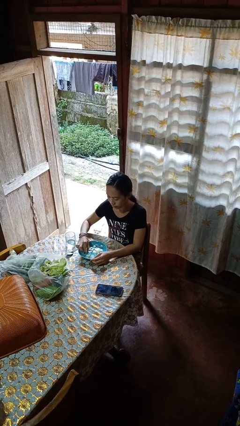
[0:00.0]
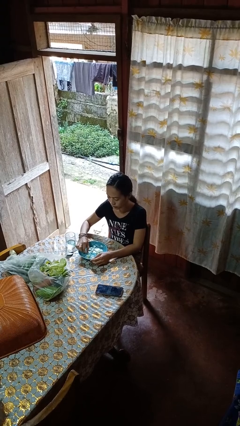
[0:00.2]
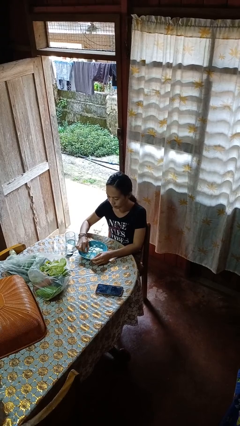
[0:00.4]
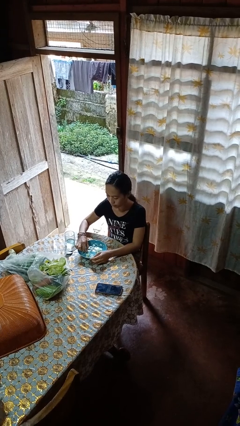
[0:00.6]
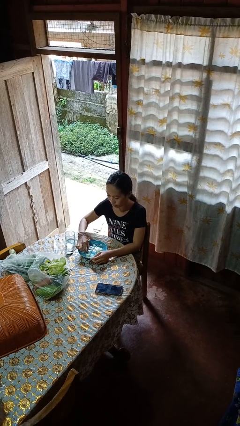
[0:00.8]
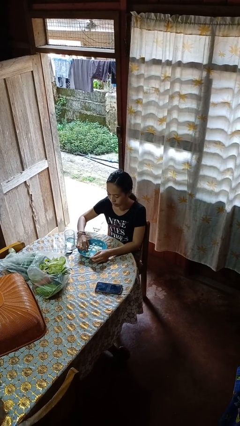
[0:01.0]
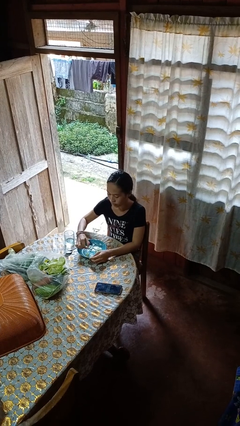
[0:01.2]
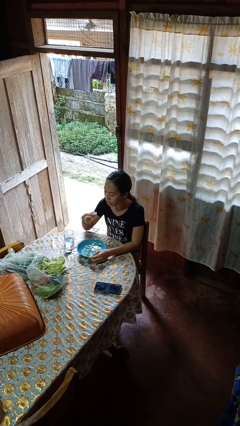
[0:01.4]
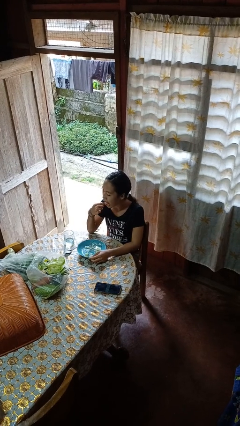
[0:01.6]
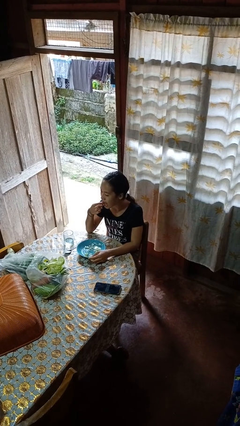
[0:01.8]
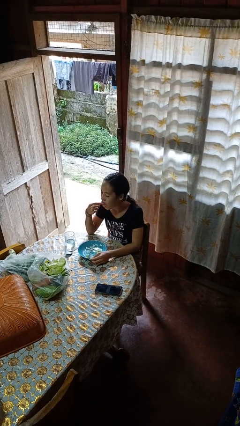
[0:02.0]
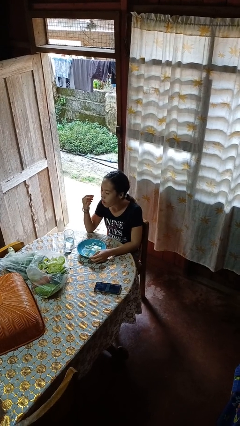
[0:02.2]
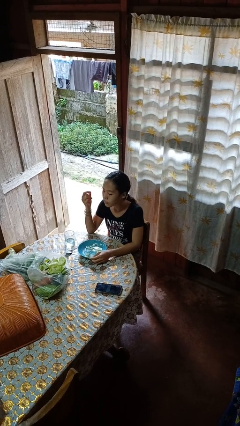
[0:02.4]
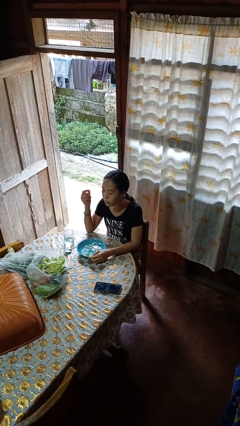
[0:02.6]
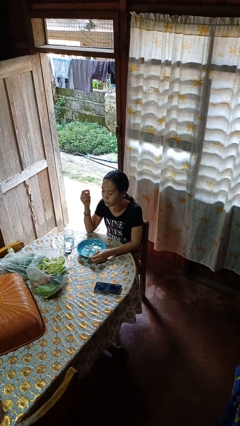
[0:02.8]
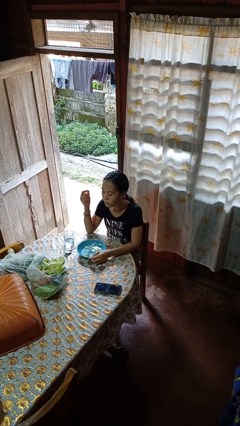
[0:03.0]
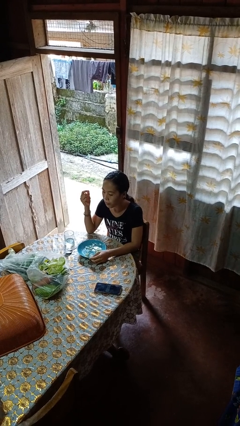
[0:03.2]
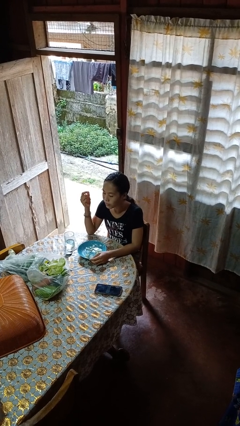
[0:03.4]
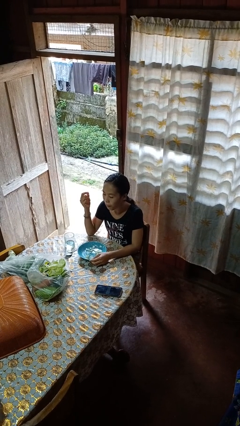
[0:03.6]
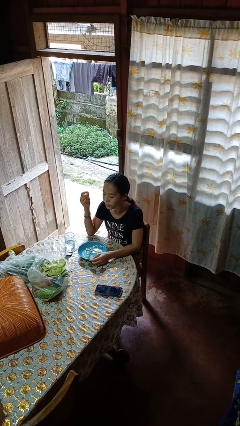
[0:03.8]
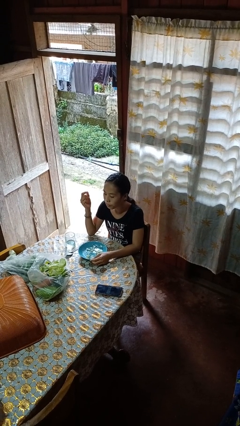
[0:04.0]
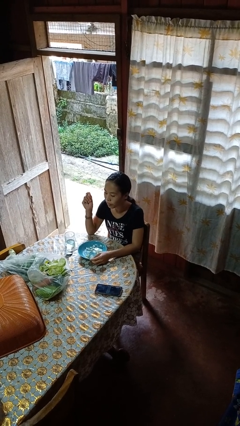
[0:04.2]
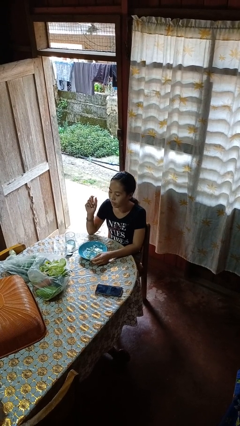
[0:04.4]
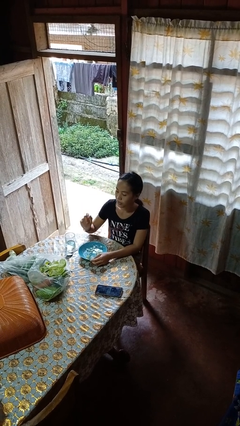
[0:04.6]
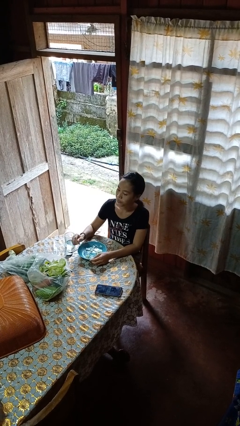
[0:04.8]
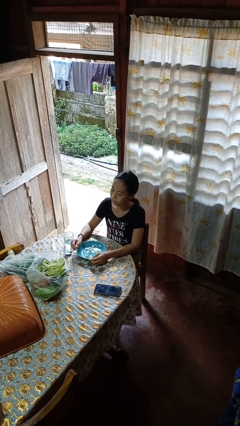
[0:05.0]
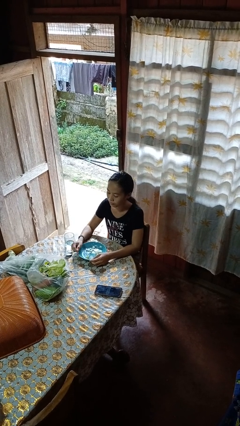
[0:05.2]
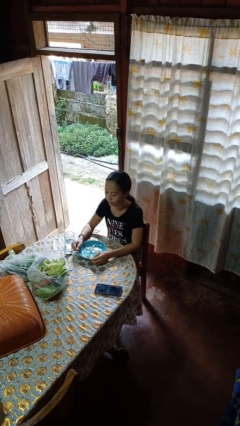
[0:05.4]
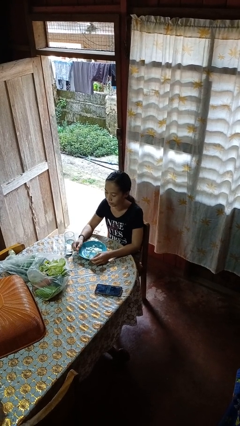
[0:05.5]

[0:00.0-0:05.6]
person eats with hands

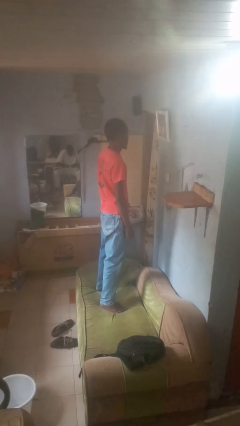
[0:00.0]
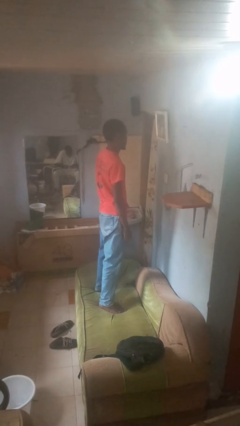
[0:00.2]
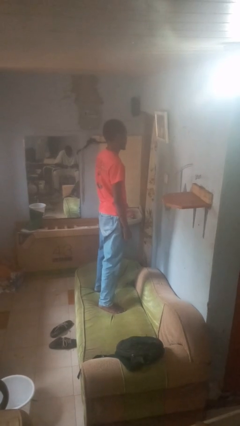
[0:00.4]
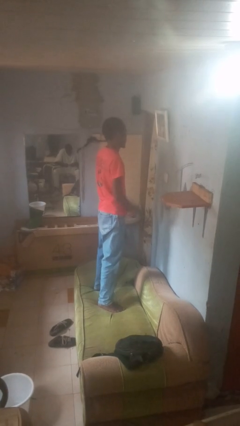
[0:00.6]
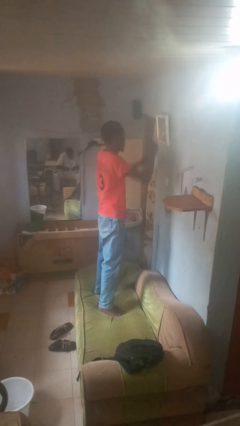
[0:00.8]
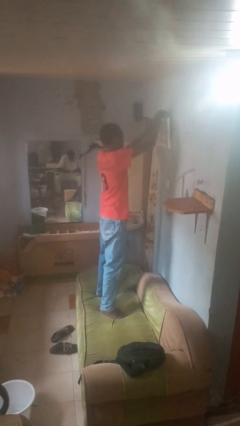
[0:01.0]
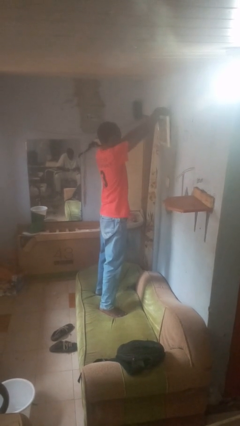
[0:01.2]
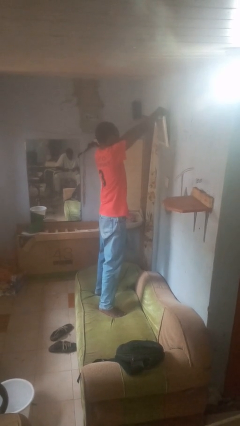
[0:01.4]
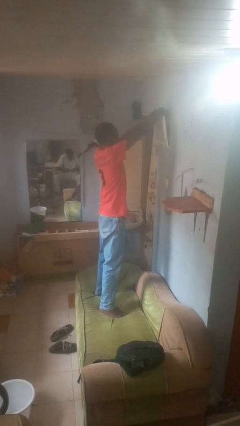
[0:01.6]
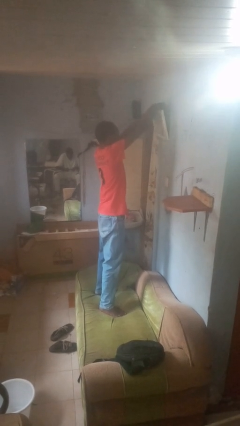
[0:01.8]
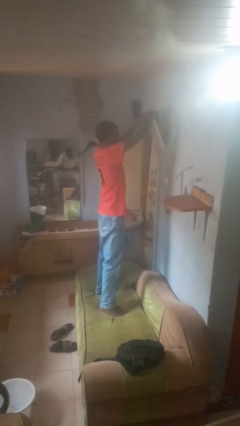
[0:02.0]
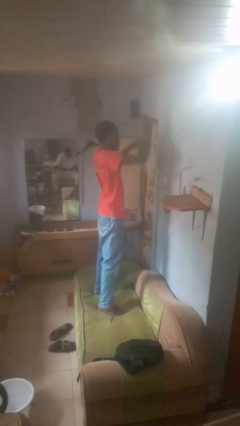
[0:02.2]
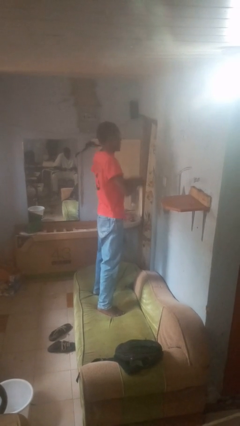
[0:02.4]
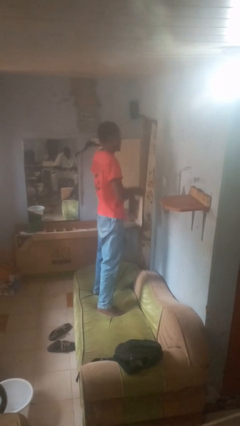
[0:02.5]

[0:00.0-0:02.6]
person takes down picture frame

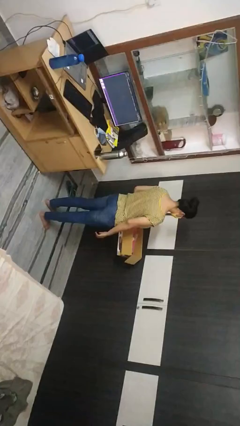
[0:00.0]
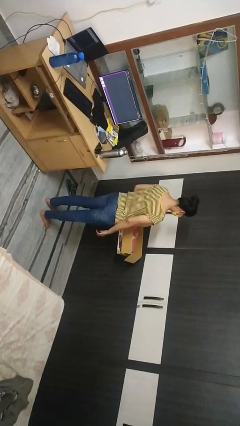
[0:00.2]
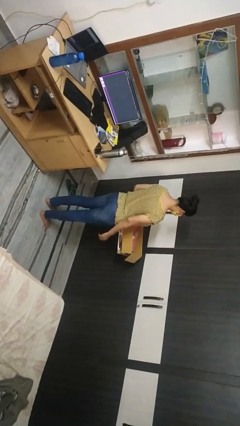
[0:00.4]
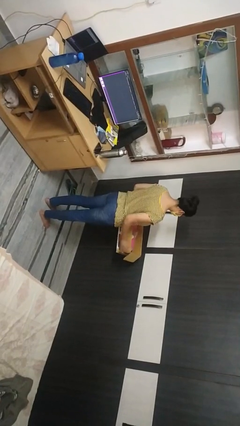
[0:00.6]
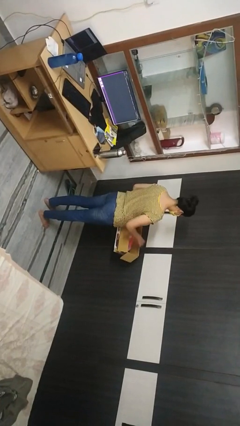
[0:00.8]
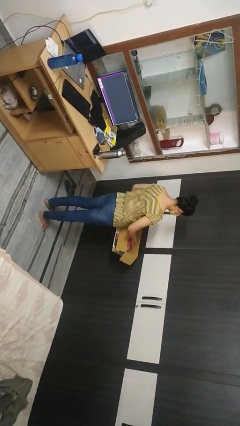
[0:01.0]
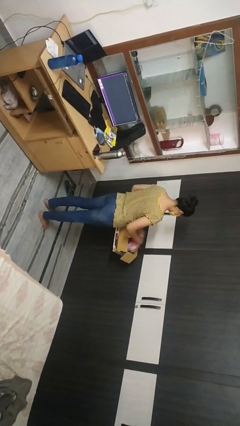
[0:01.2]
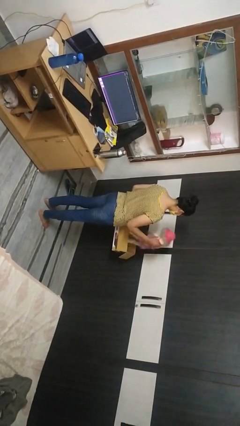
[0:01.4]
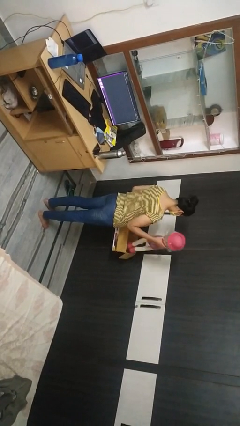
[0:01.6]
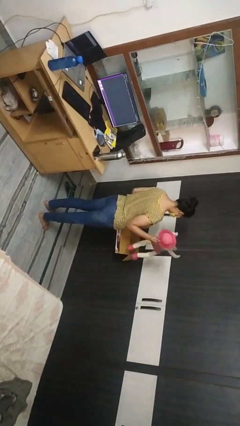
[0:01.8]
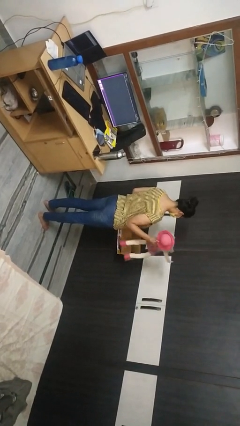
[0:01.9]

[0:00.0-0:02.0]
person takes object from box

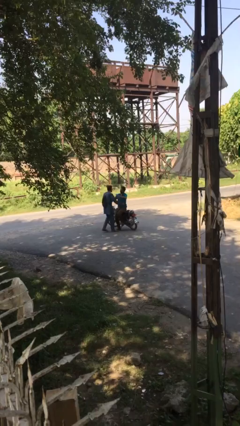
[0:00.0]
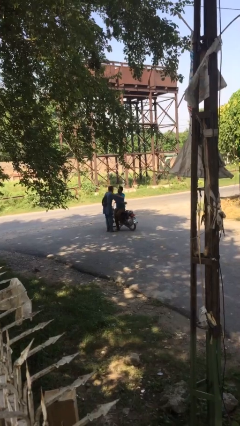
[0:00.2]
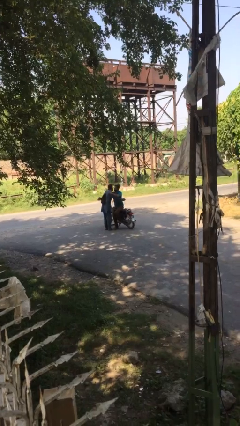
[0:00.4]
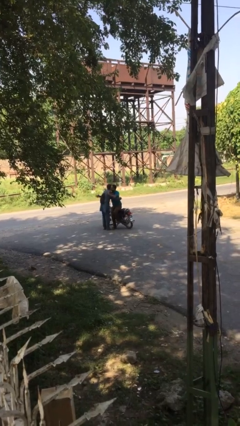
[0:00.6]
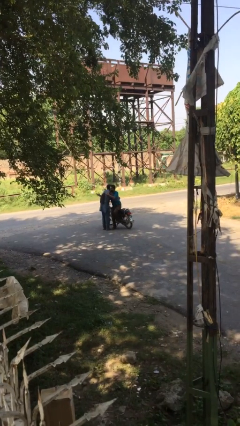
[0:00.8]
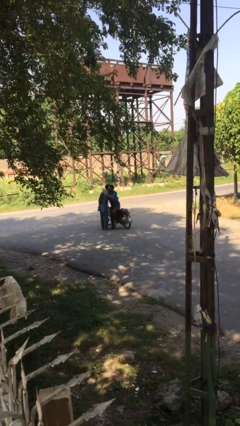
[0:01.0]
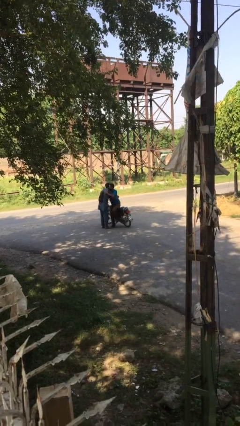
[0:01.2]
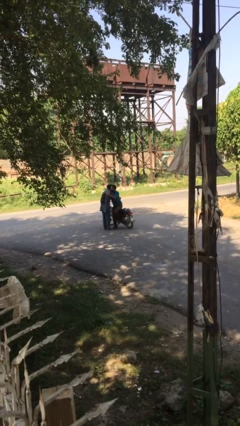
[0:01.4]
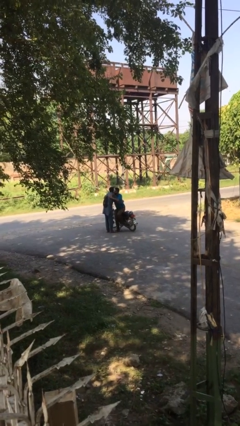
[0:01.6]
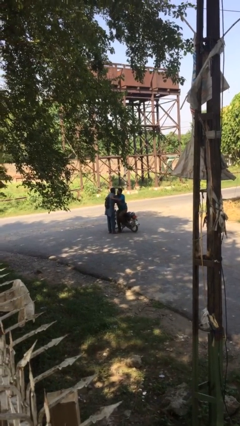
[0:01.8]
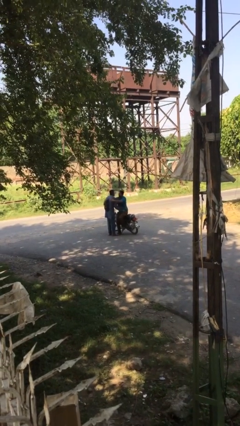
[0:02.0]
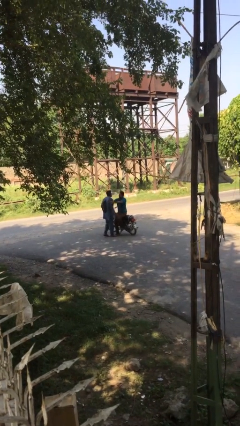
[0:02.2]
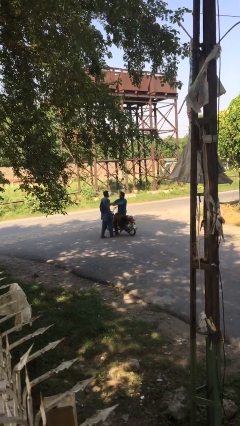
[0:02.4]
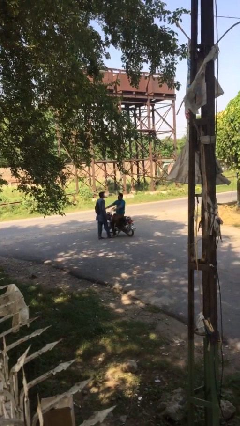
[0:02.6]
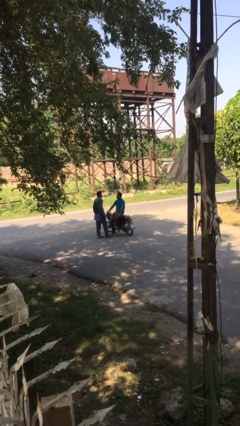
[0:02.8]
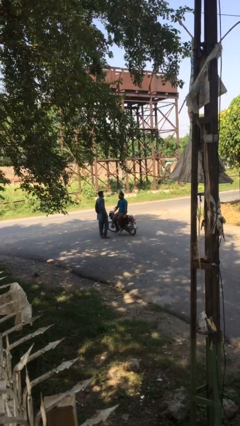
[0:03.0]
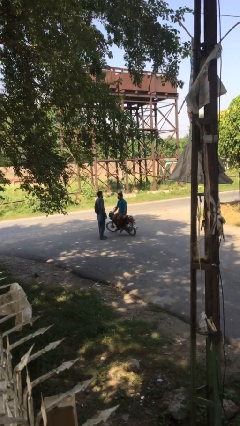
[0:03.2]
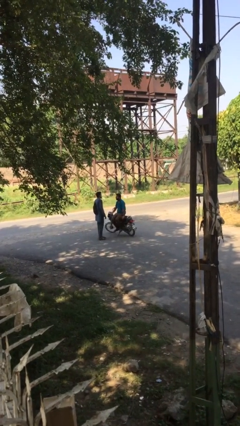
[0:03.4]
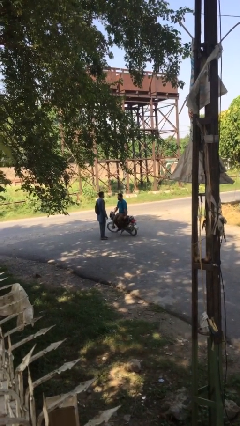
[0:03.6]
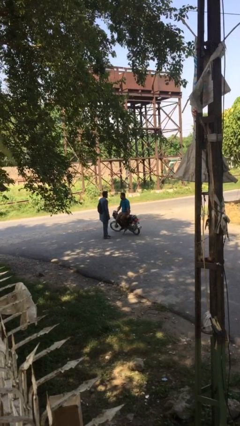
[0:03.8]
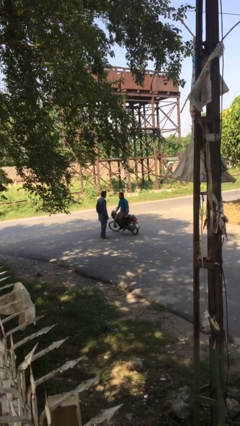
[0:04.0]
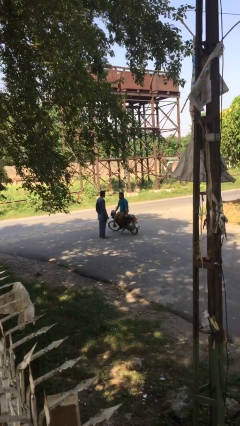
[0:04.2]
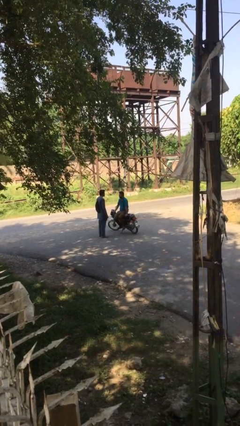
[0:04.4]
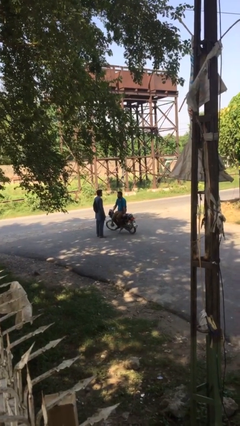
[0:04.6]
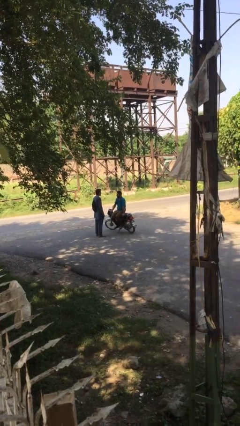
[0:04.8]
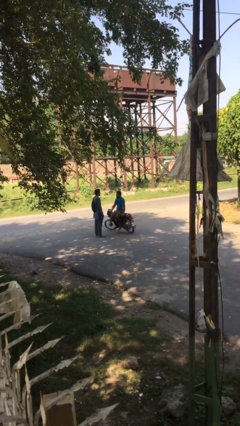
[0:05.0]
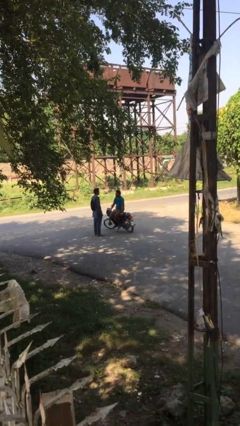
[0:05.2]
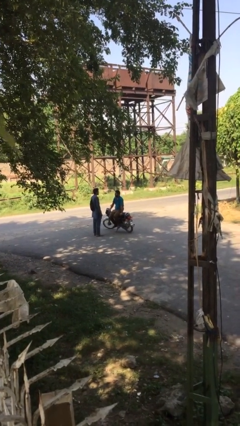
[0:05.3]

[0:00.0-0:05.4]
person embraces person

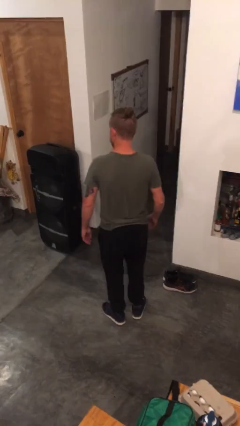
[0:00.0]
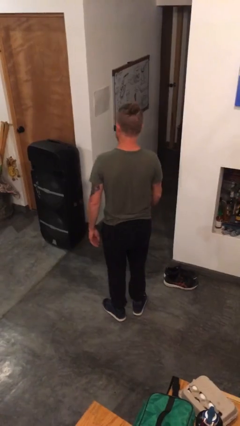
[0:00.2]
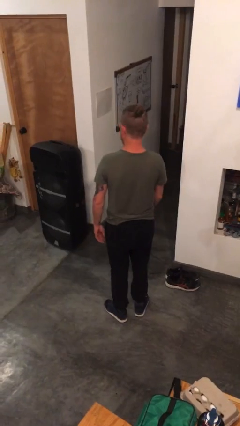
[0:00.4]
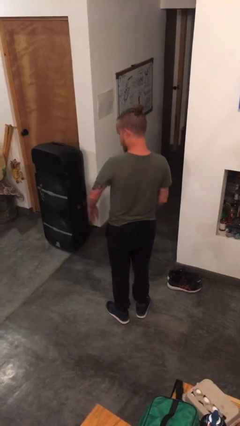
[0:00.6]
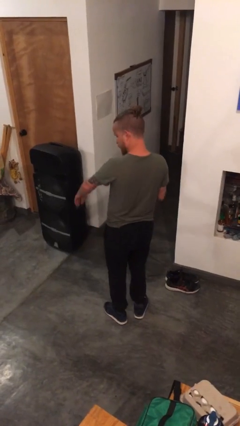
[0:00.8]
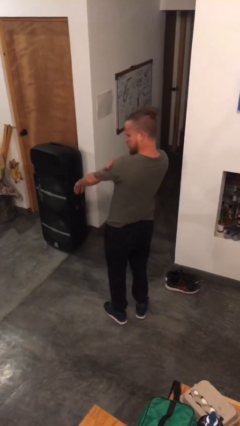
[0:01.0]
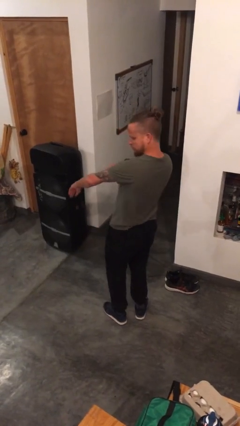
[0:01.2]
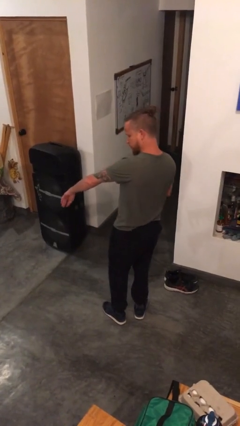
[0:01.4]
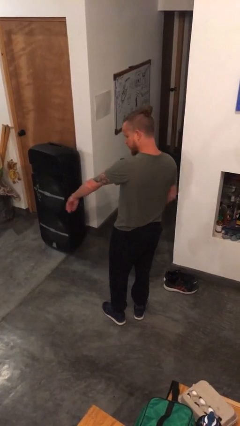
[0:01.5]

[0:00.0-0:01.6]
person swats bug

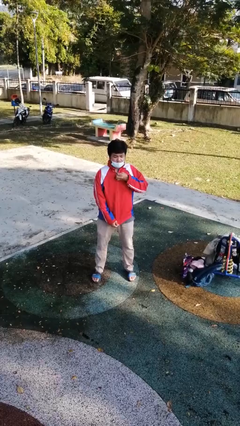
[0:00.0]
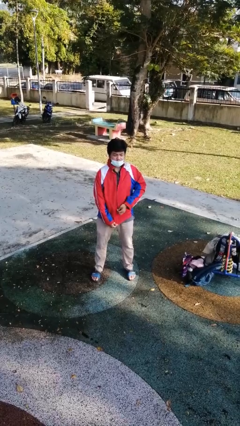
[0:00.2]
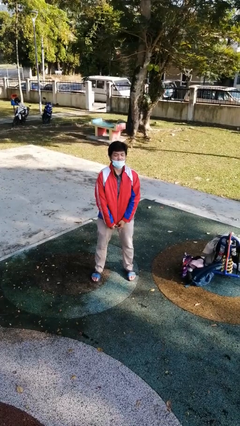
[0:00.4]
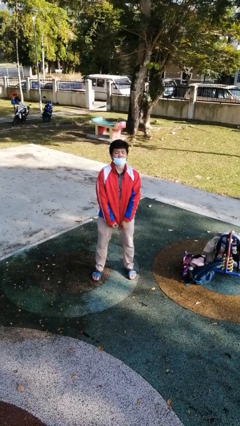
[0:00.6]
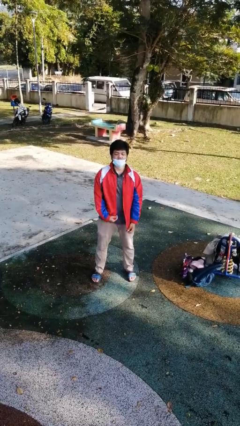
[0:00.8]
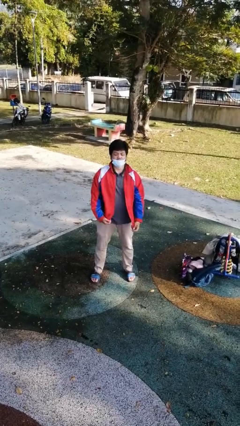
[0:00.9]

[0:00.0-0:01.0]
person unzips jacket
